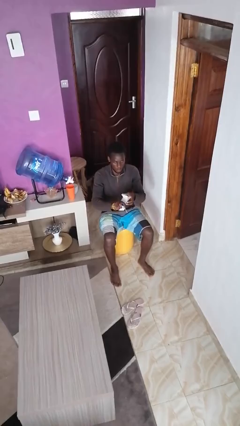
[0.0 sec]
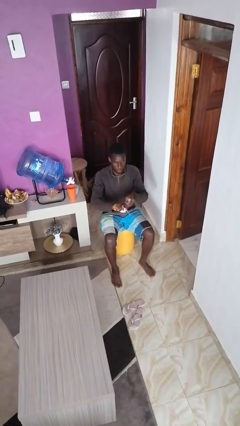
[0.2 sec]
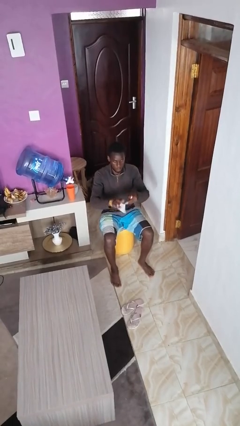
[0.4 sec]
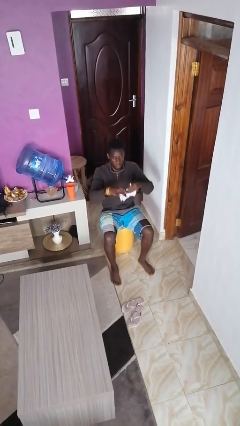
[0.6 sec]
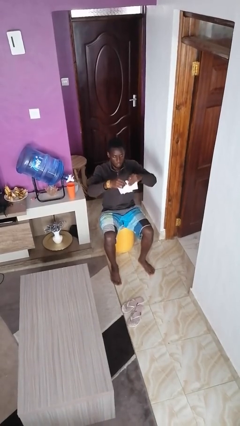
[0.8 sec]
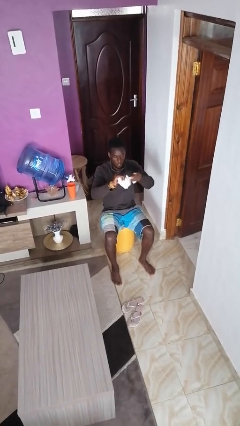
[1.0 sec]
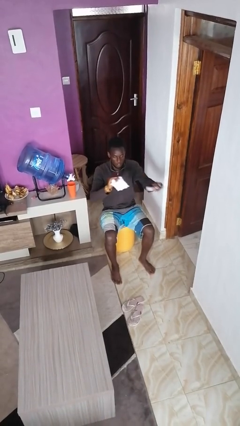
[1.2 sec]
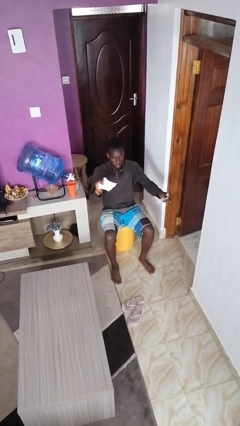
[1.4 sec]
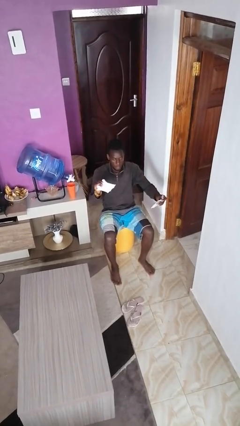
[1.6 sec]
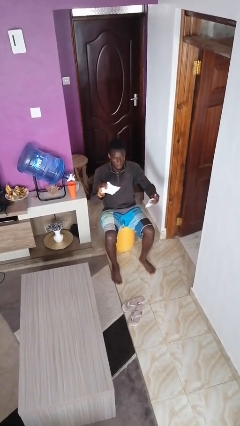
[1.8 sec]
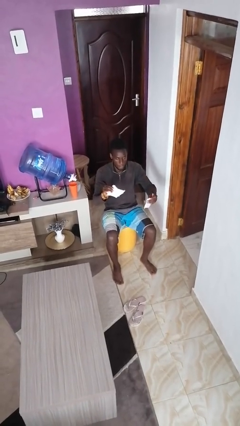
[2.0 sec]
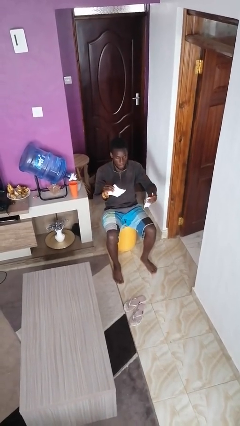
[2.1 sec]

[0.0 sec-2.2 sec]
person tears paper

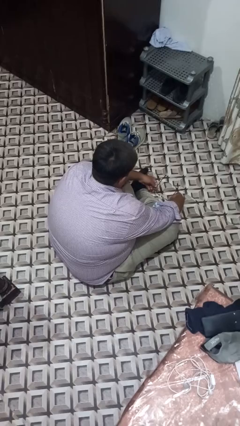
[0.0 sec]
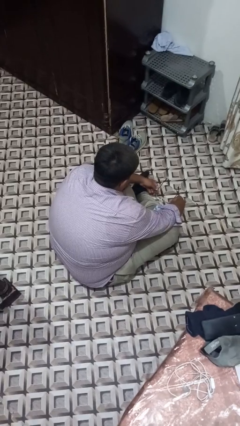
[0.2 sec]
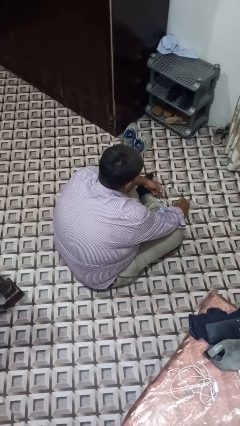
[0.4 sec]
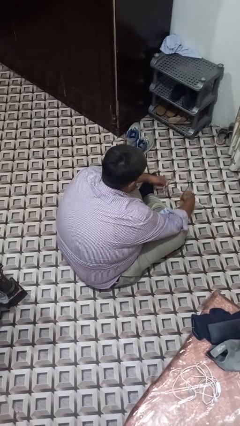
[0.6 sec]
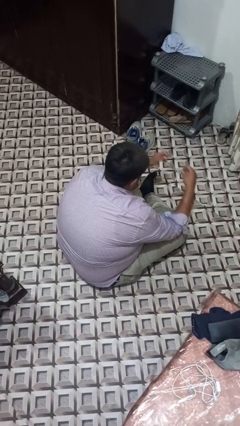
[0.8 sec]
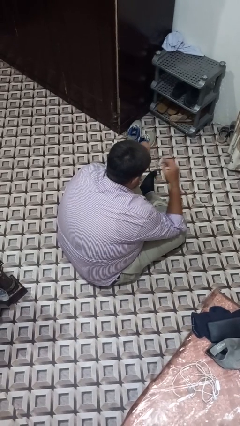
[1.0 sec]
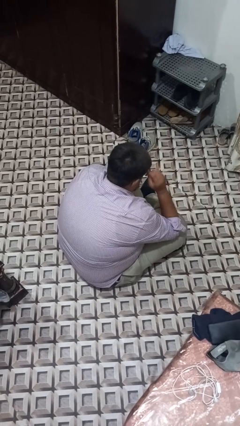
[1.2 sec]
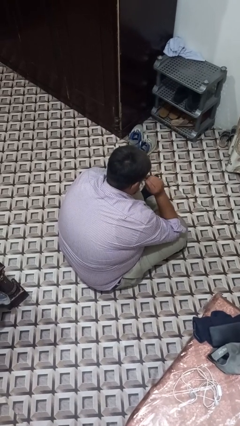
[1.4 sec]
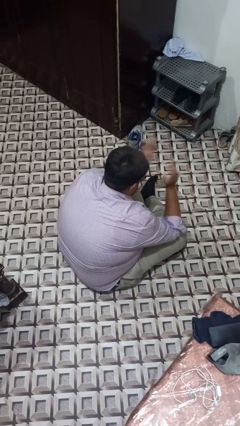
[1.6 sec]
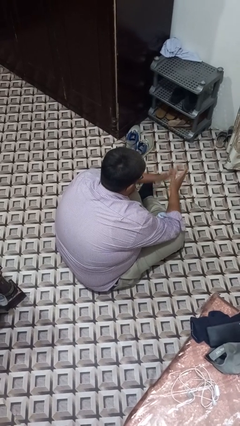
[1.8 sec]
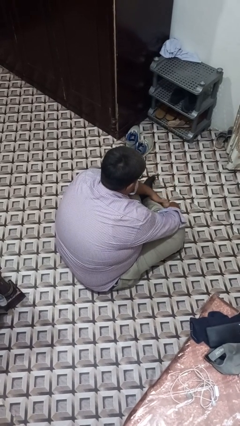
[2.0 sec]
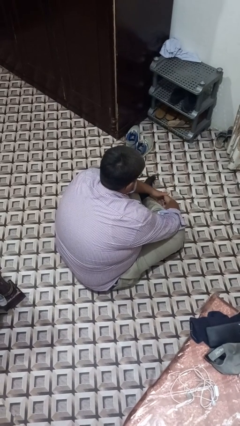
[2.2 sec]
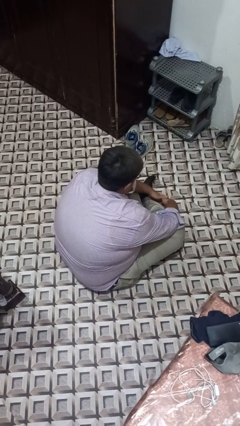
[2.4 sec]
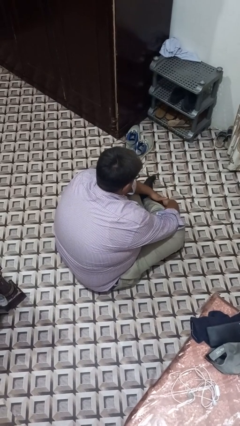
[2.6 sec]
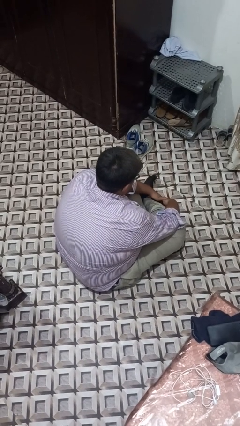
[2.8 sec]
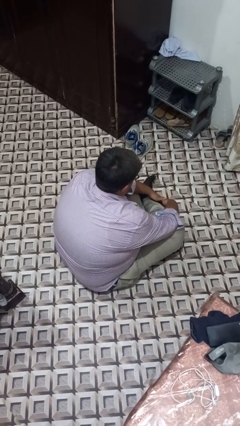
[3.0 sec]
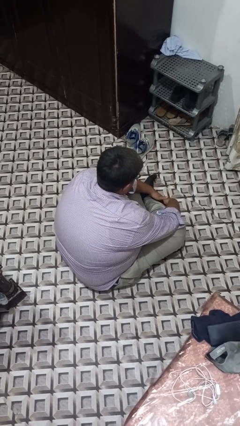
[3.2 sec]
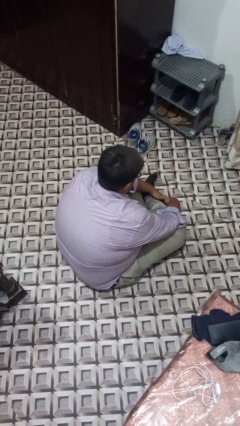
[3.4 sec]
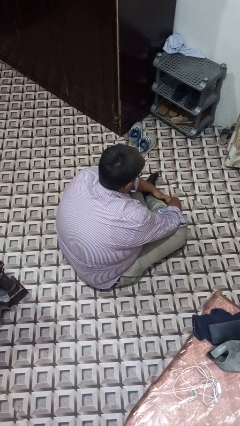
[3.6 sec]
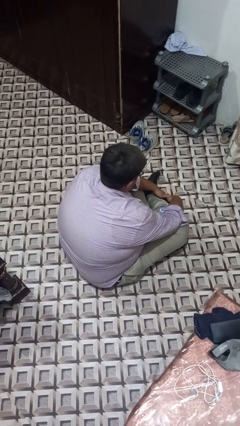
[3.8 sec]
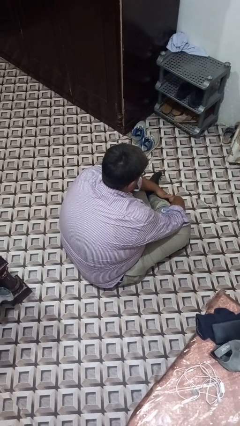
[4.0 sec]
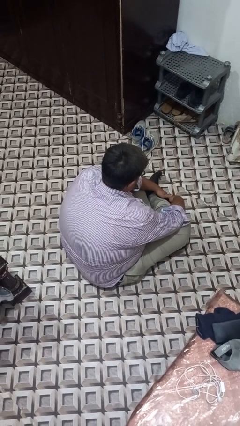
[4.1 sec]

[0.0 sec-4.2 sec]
person puts on glasses

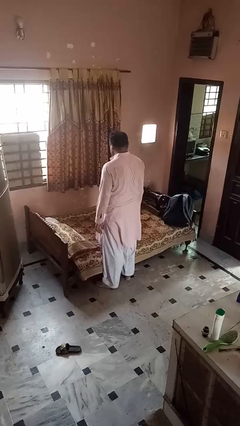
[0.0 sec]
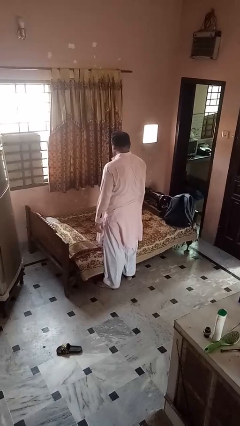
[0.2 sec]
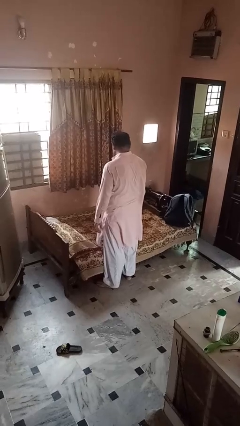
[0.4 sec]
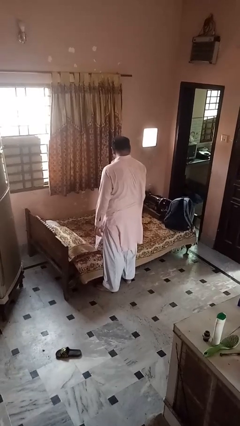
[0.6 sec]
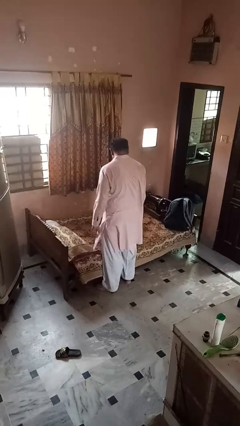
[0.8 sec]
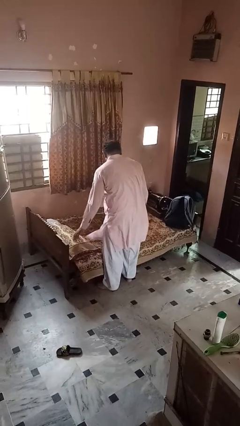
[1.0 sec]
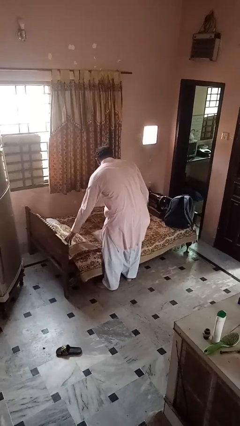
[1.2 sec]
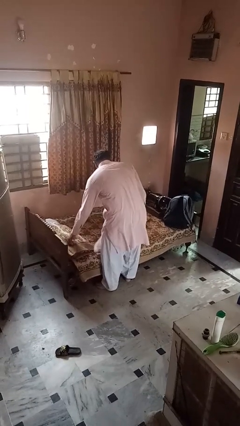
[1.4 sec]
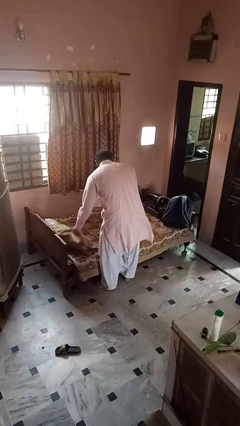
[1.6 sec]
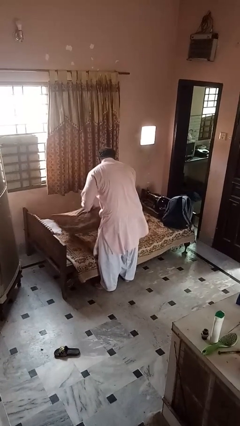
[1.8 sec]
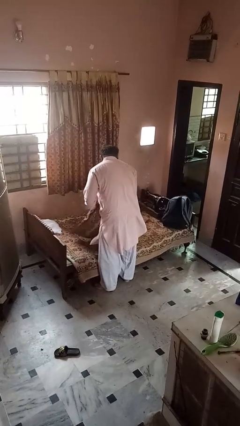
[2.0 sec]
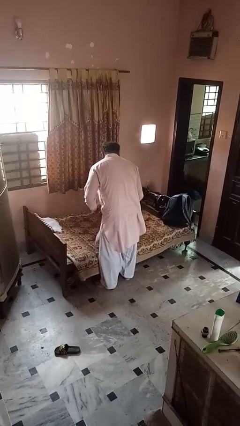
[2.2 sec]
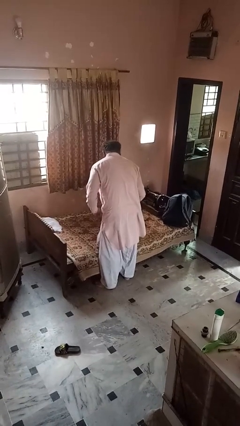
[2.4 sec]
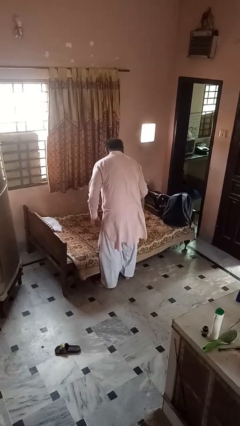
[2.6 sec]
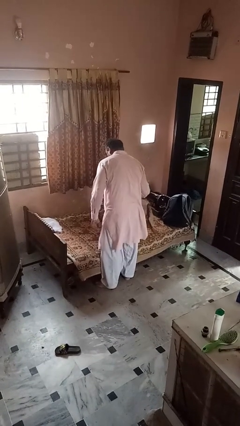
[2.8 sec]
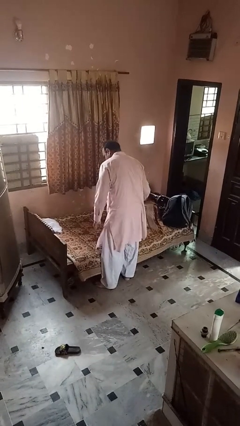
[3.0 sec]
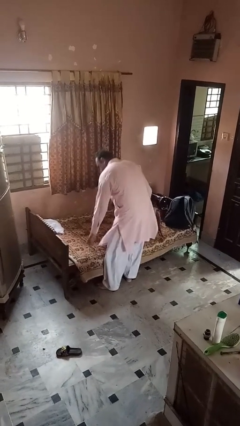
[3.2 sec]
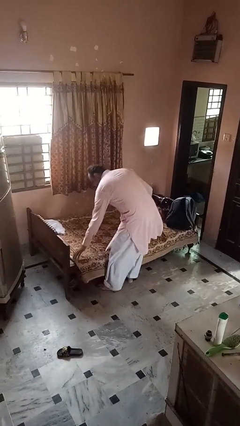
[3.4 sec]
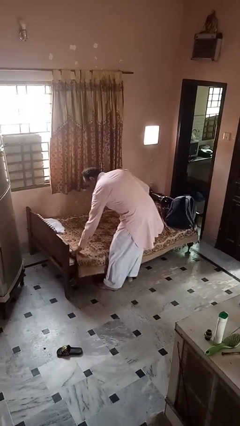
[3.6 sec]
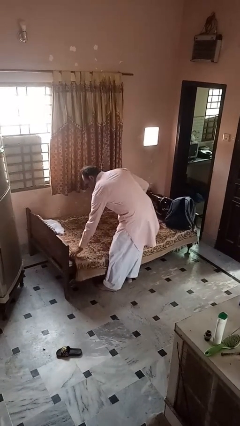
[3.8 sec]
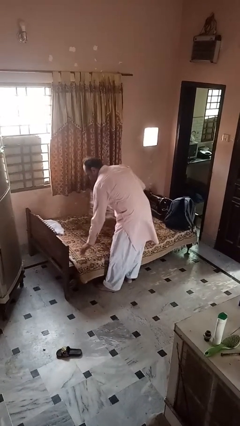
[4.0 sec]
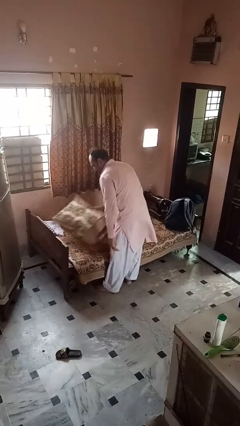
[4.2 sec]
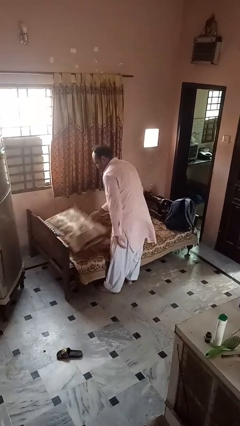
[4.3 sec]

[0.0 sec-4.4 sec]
person searches under bed

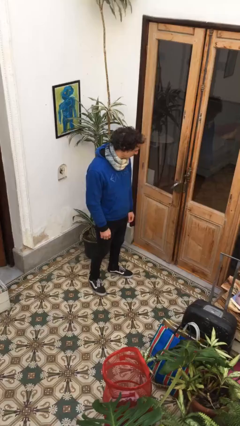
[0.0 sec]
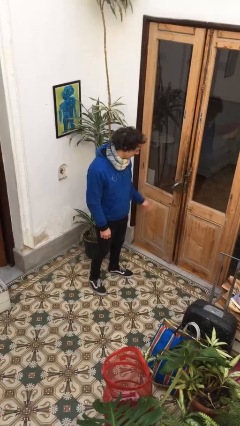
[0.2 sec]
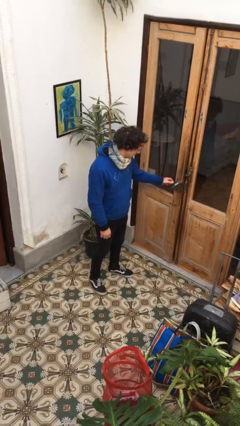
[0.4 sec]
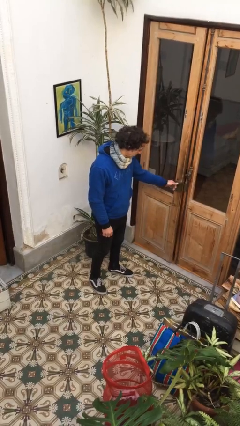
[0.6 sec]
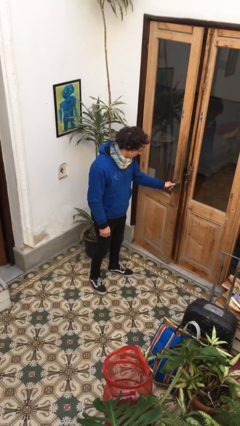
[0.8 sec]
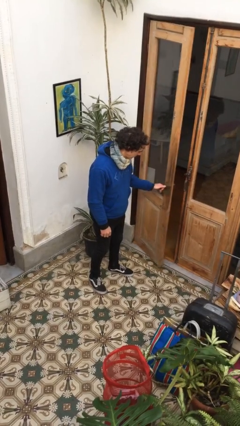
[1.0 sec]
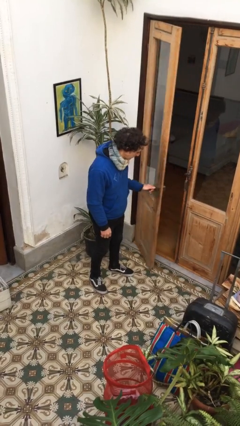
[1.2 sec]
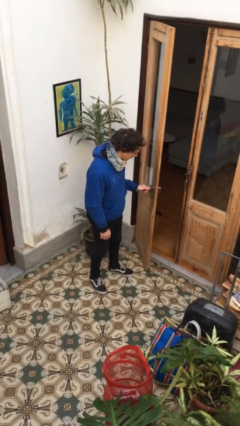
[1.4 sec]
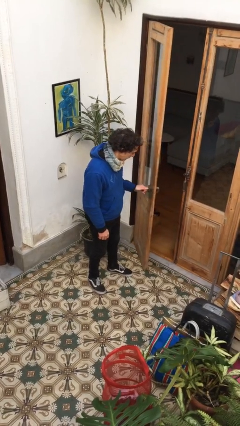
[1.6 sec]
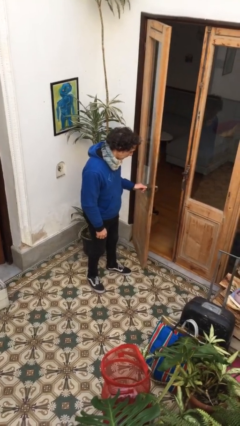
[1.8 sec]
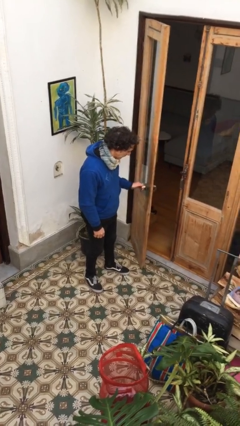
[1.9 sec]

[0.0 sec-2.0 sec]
person opens facility door

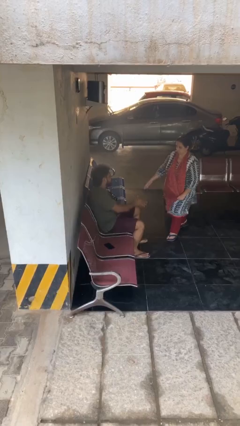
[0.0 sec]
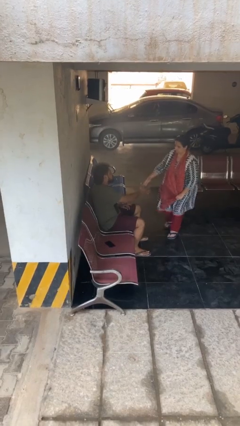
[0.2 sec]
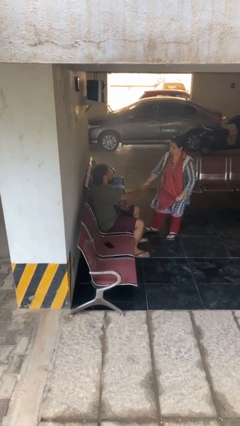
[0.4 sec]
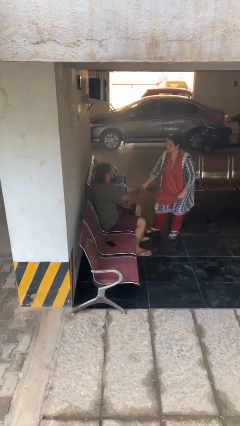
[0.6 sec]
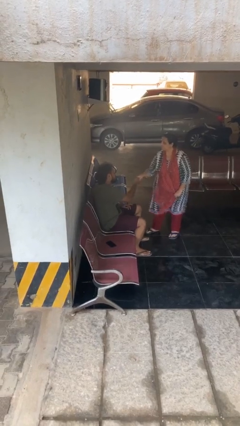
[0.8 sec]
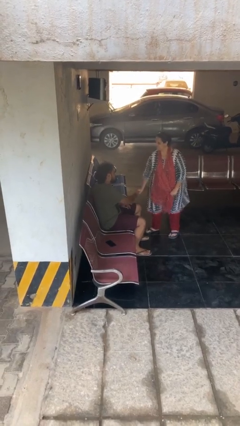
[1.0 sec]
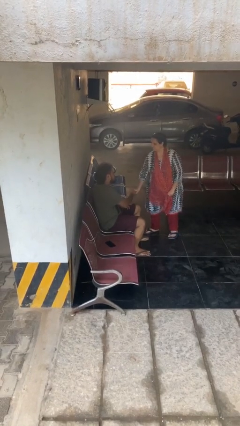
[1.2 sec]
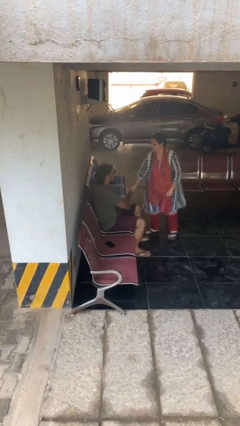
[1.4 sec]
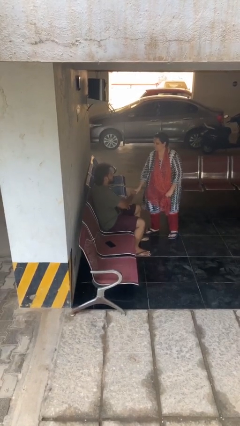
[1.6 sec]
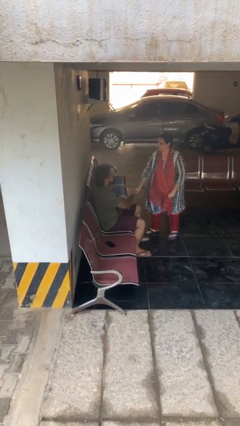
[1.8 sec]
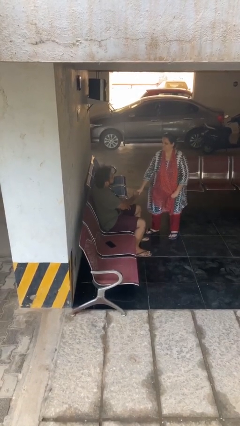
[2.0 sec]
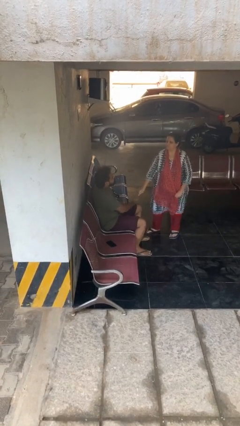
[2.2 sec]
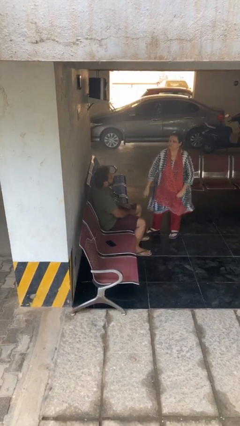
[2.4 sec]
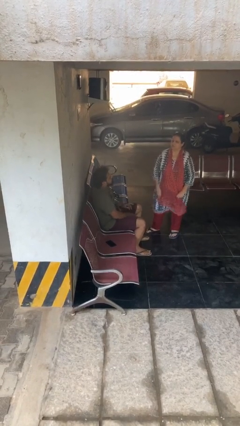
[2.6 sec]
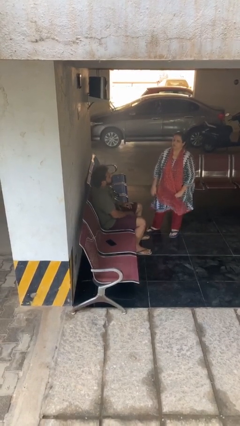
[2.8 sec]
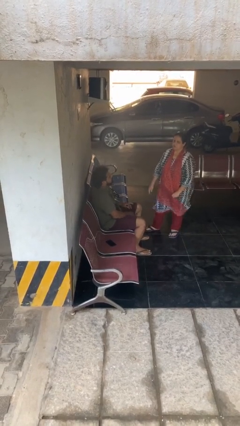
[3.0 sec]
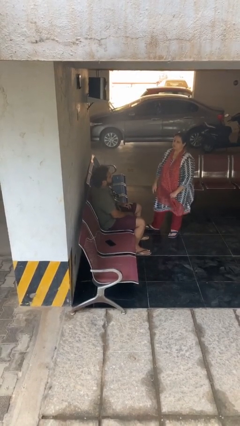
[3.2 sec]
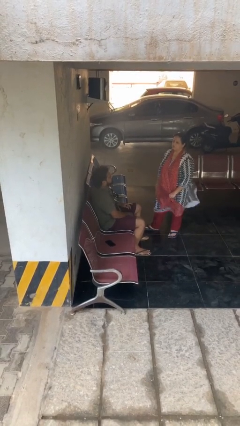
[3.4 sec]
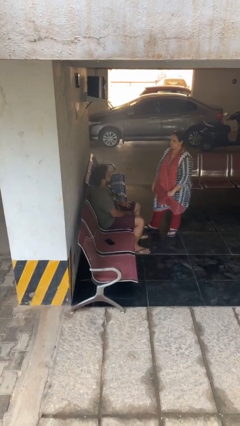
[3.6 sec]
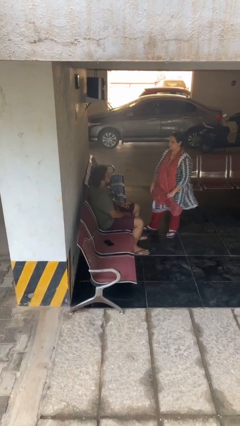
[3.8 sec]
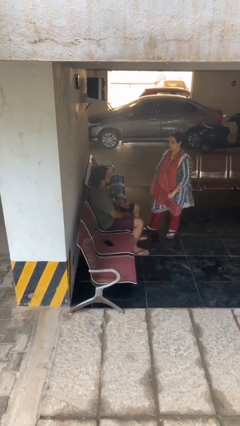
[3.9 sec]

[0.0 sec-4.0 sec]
person shakes hand

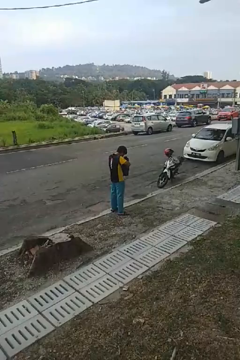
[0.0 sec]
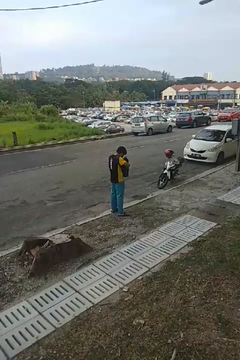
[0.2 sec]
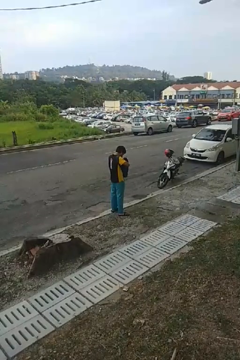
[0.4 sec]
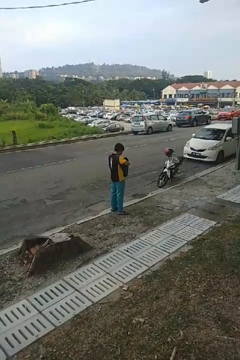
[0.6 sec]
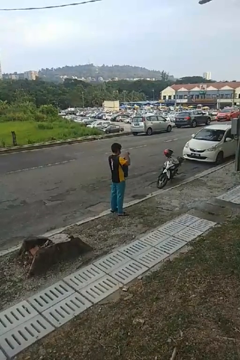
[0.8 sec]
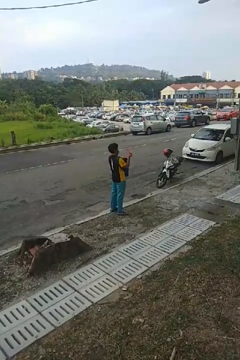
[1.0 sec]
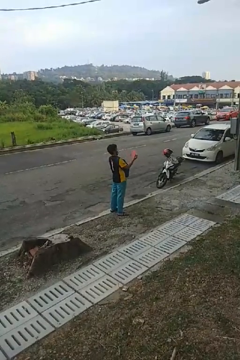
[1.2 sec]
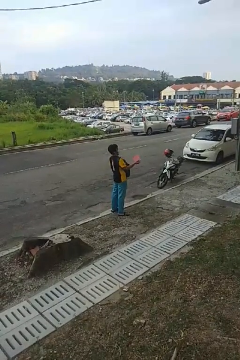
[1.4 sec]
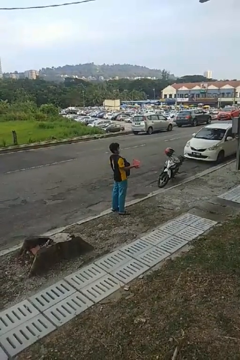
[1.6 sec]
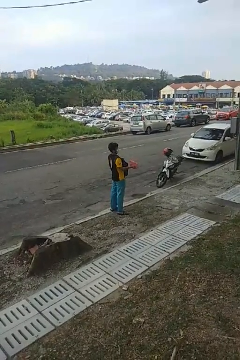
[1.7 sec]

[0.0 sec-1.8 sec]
person takes object from backpack
